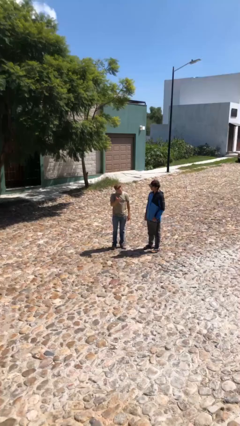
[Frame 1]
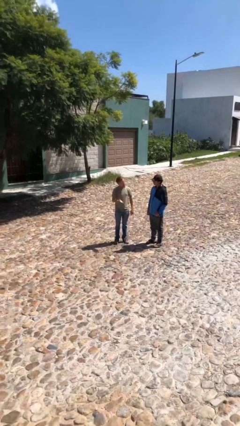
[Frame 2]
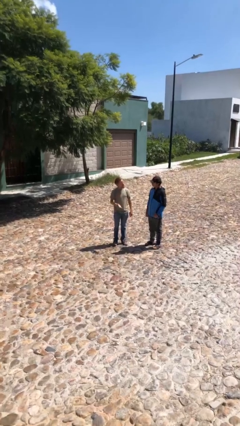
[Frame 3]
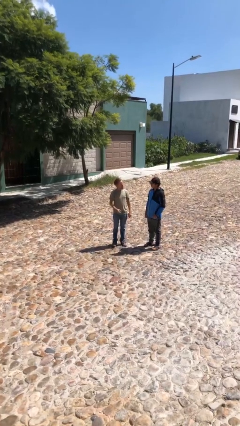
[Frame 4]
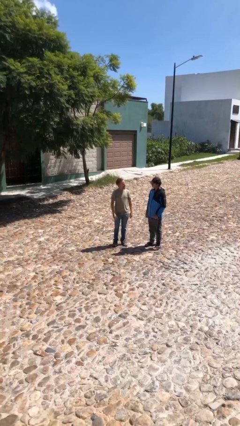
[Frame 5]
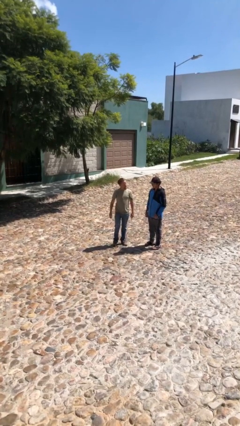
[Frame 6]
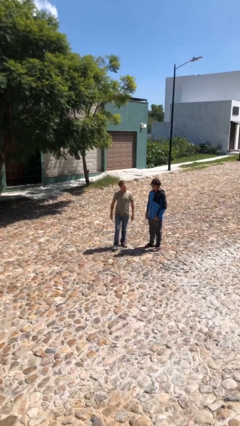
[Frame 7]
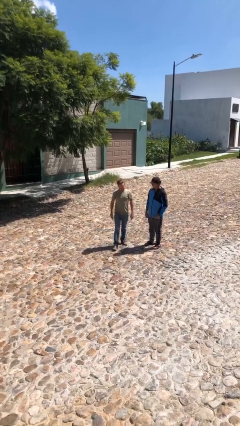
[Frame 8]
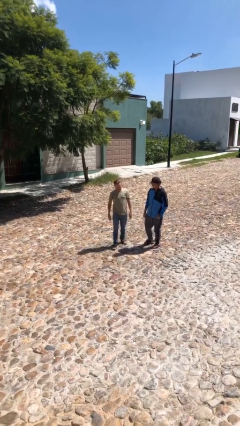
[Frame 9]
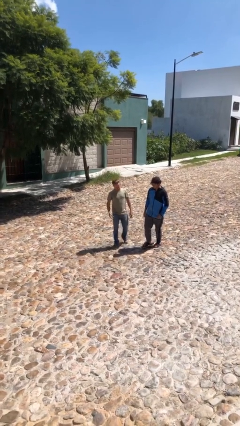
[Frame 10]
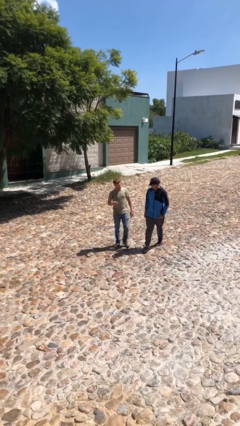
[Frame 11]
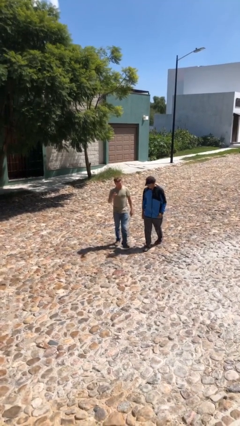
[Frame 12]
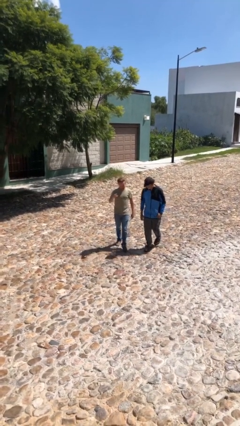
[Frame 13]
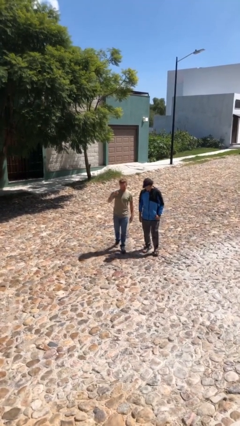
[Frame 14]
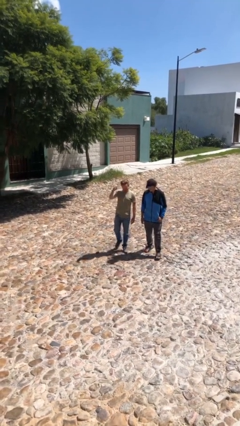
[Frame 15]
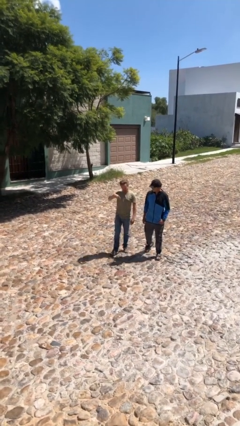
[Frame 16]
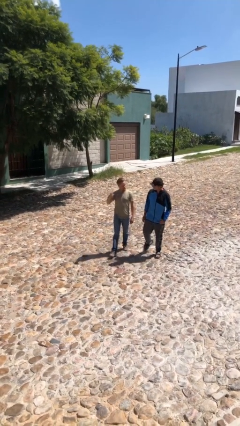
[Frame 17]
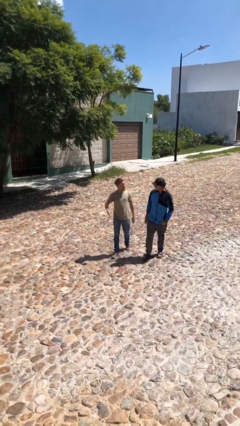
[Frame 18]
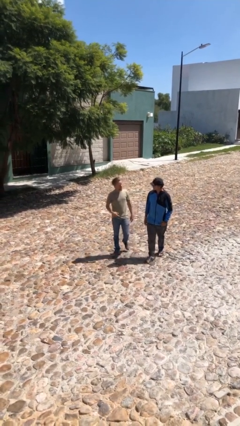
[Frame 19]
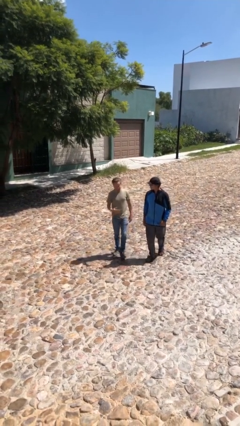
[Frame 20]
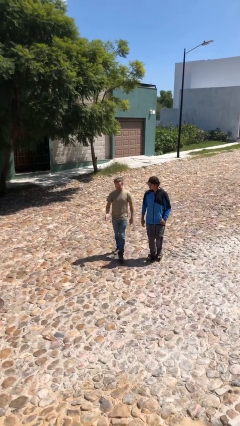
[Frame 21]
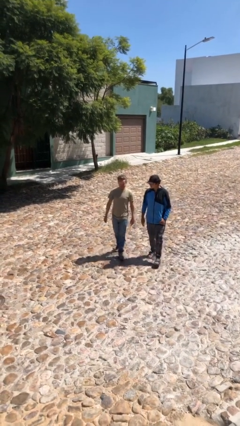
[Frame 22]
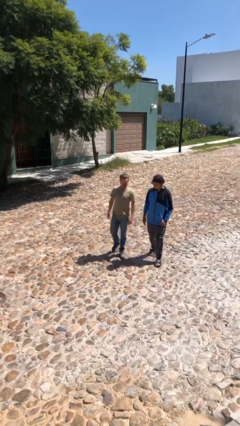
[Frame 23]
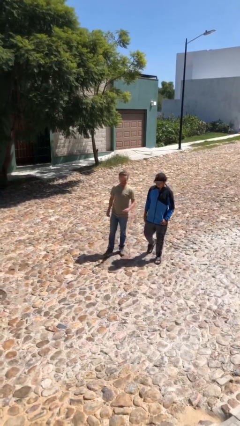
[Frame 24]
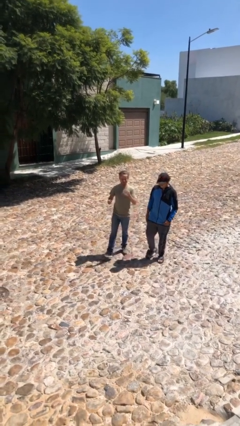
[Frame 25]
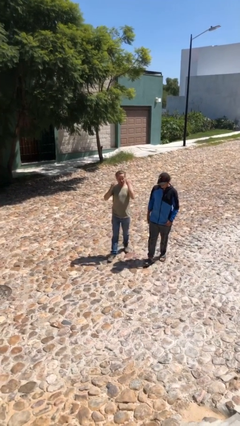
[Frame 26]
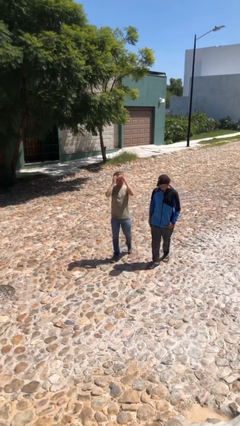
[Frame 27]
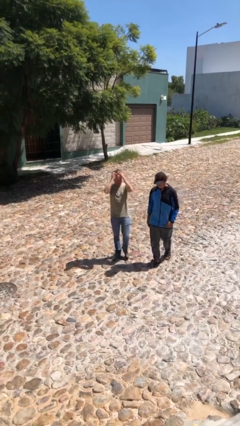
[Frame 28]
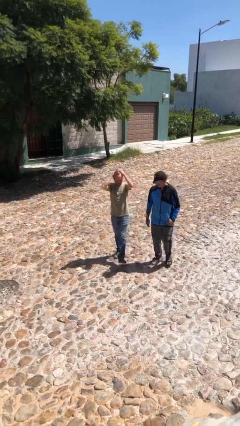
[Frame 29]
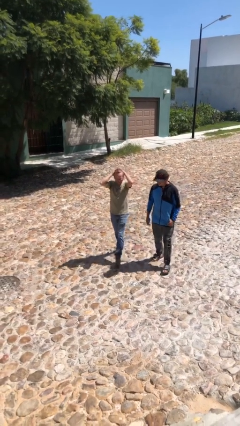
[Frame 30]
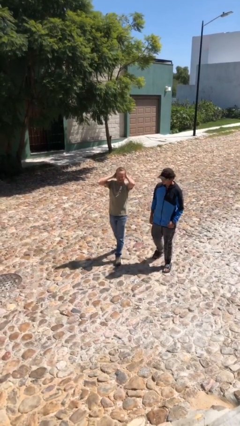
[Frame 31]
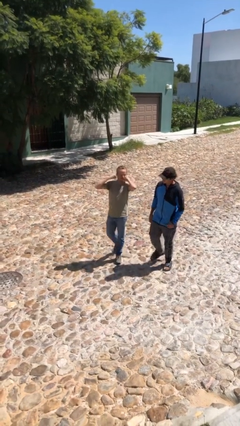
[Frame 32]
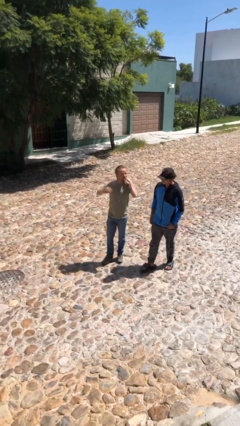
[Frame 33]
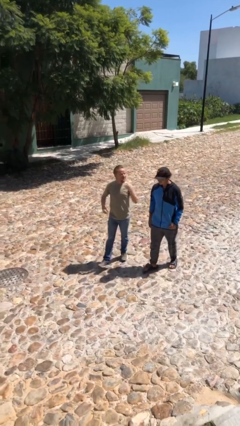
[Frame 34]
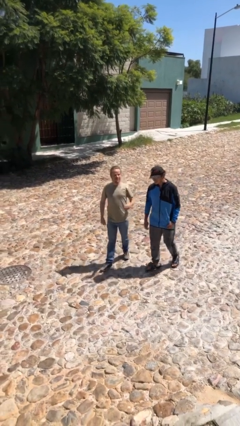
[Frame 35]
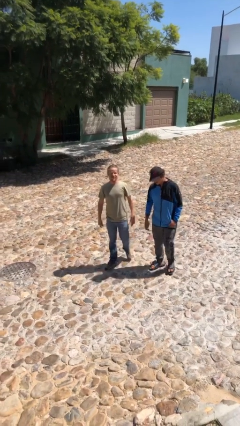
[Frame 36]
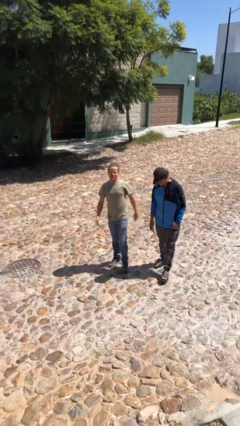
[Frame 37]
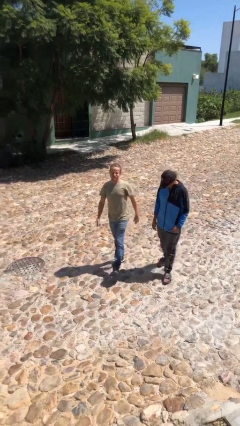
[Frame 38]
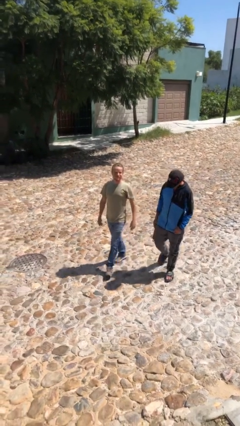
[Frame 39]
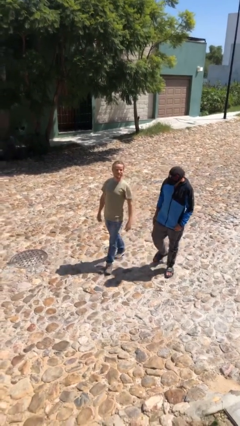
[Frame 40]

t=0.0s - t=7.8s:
person talks to person

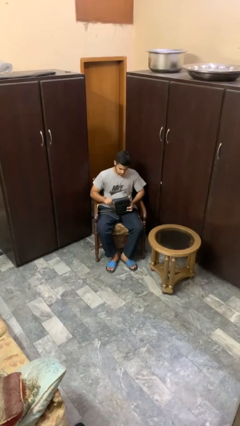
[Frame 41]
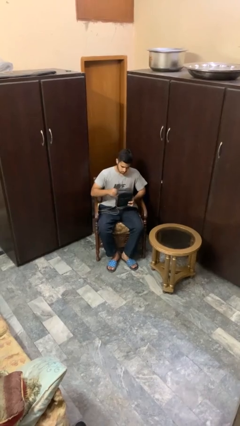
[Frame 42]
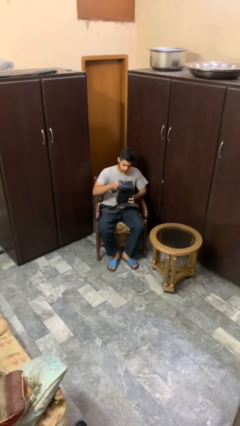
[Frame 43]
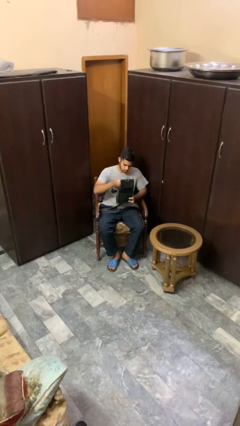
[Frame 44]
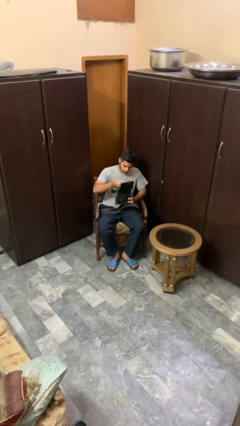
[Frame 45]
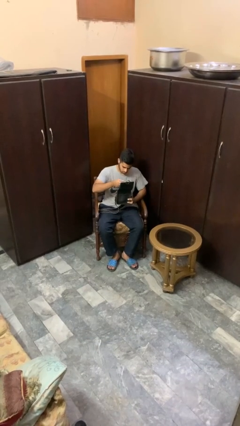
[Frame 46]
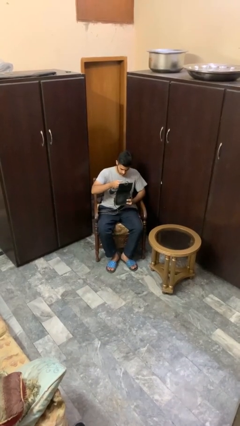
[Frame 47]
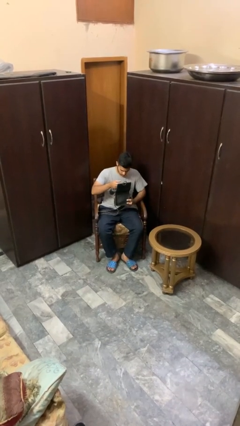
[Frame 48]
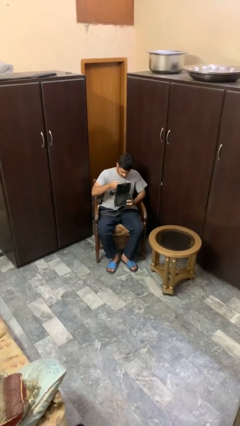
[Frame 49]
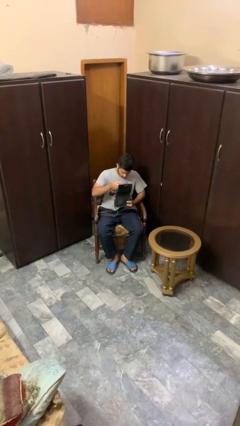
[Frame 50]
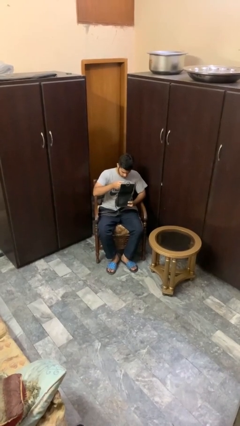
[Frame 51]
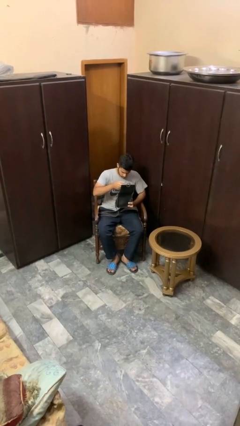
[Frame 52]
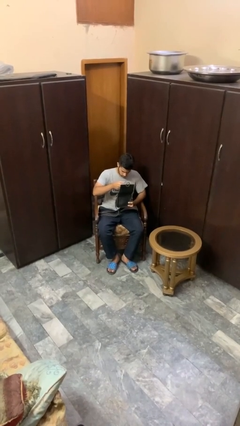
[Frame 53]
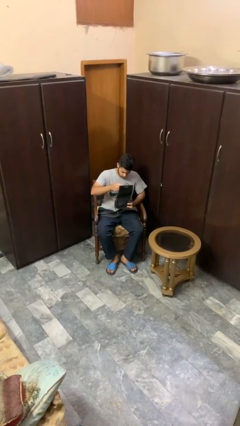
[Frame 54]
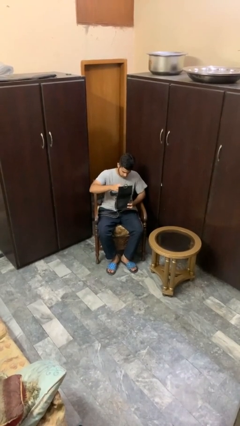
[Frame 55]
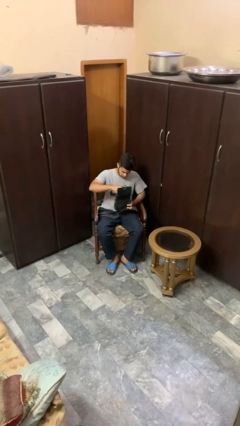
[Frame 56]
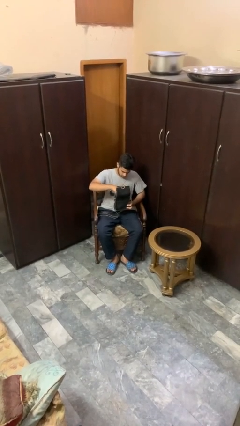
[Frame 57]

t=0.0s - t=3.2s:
person searches in purse

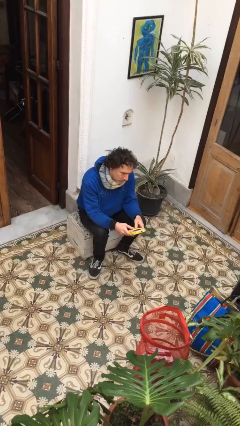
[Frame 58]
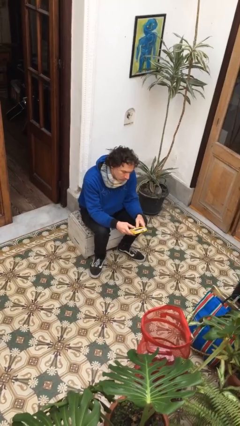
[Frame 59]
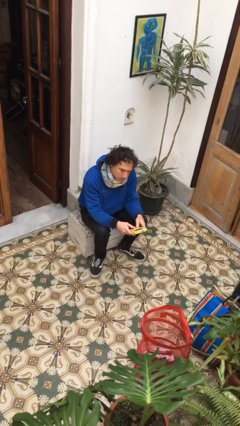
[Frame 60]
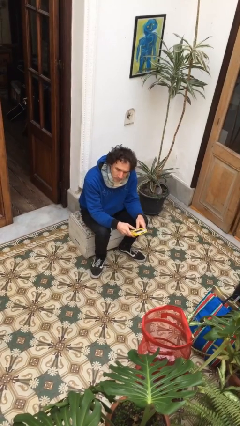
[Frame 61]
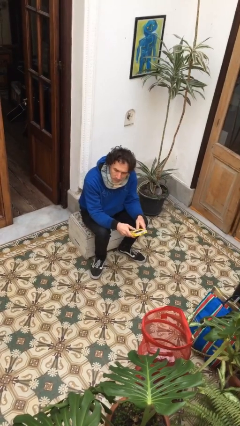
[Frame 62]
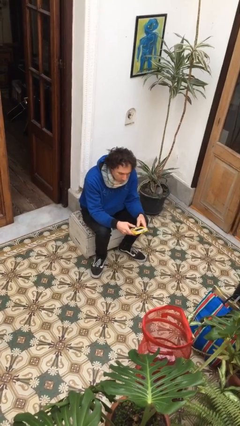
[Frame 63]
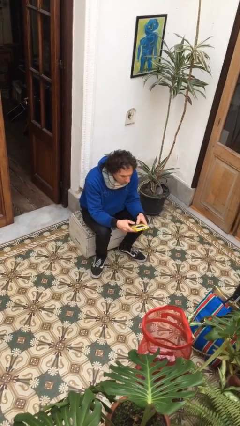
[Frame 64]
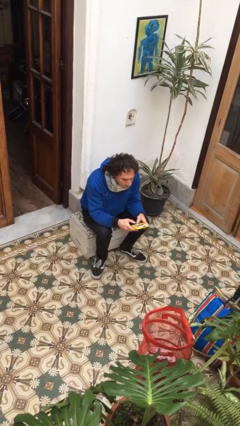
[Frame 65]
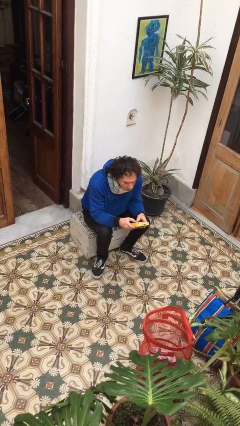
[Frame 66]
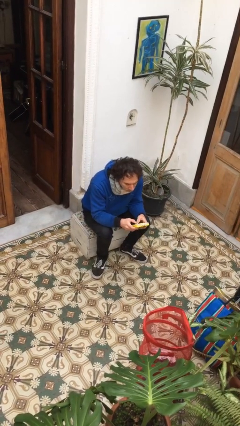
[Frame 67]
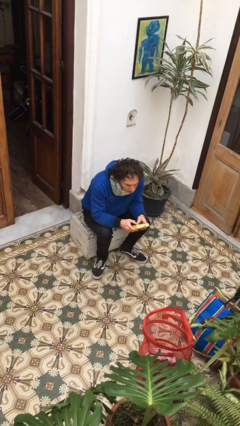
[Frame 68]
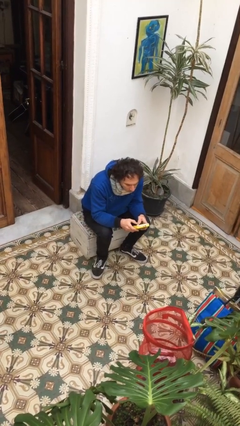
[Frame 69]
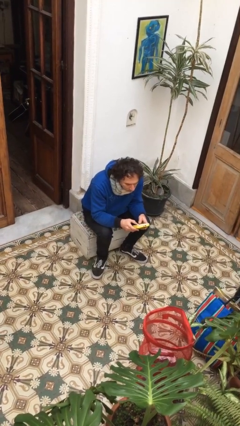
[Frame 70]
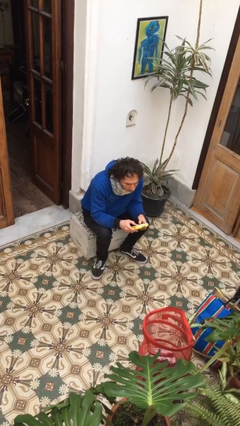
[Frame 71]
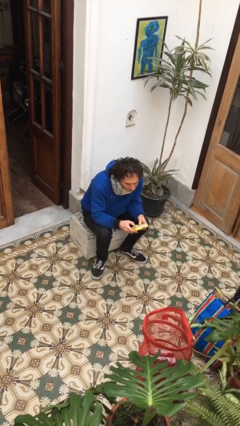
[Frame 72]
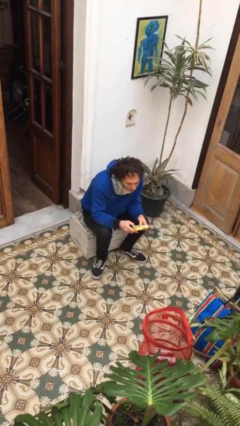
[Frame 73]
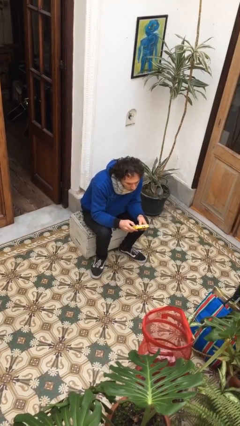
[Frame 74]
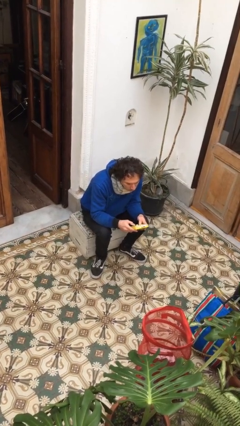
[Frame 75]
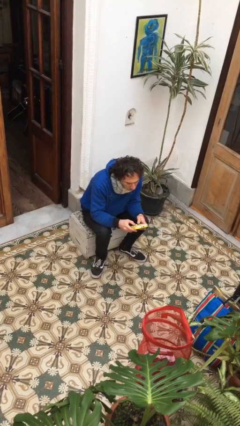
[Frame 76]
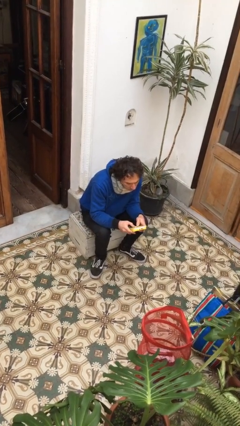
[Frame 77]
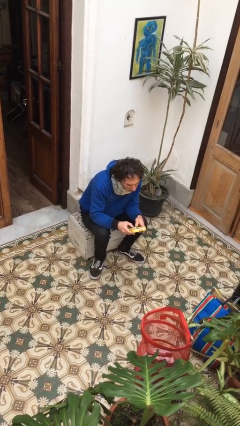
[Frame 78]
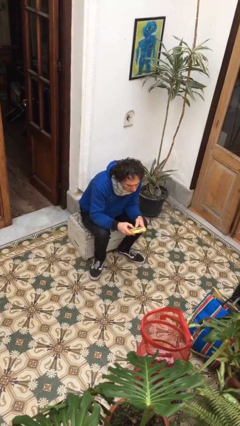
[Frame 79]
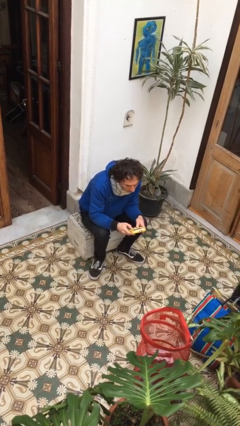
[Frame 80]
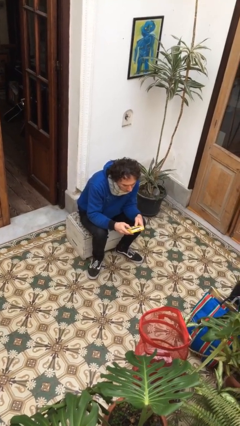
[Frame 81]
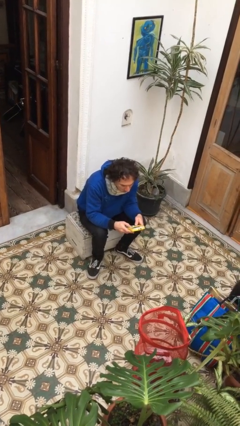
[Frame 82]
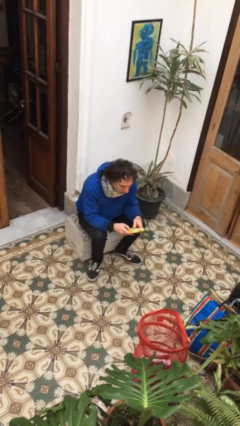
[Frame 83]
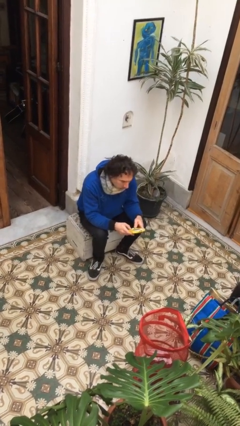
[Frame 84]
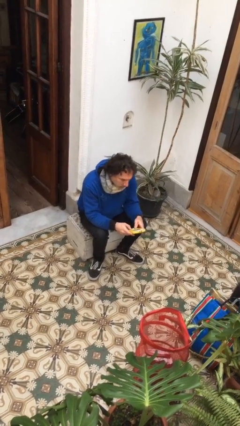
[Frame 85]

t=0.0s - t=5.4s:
person interacts with handheld game

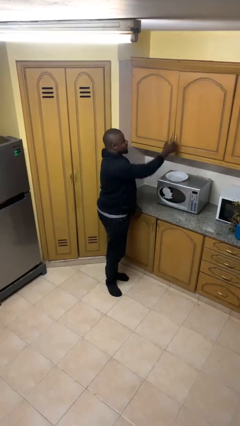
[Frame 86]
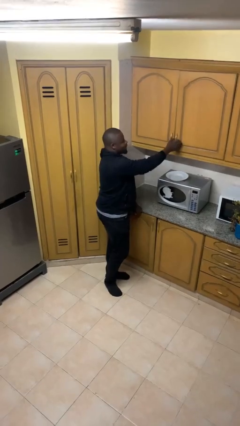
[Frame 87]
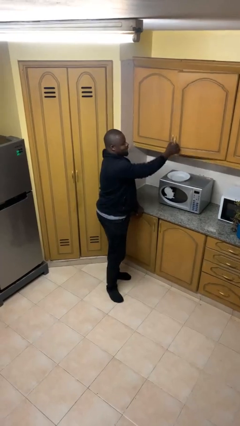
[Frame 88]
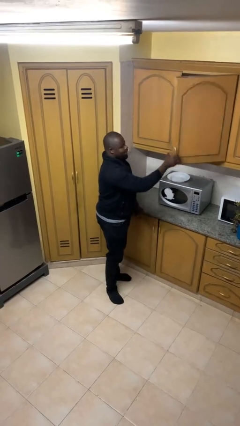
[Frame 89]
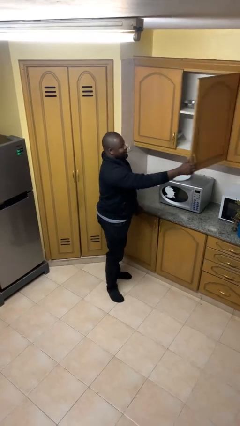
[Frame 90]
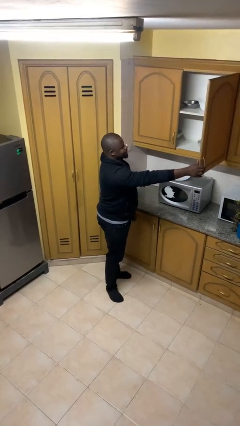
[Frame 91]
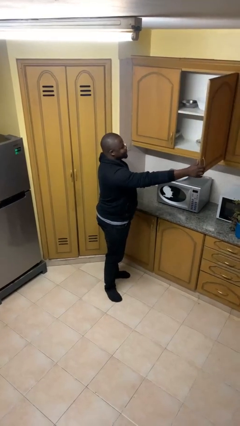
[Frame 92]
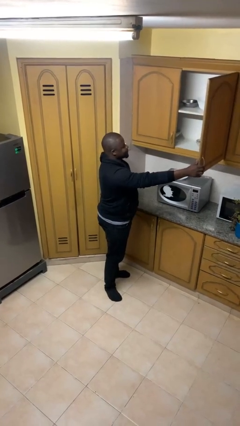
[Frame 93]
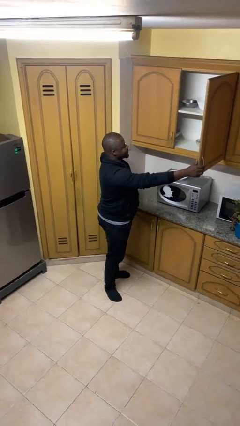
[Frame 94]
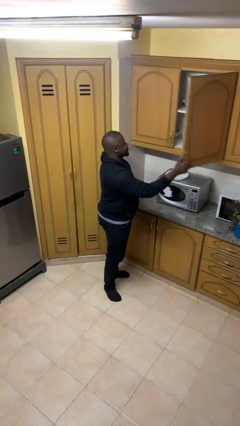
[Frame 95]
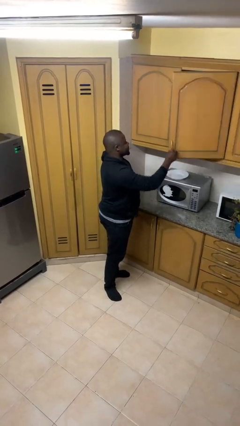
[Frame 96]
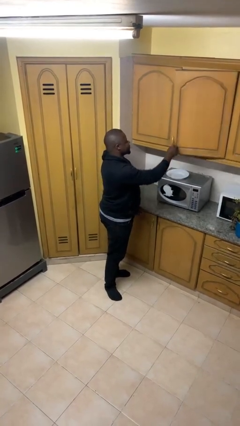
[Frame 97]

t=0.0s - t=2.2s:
person opens cabinet
